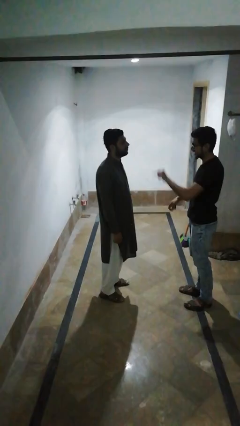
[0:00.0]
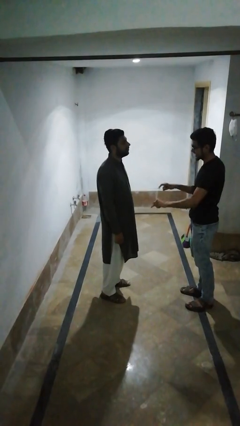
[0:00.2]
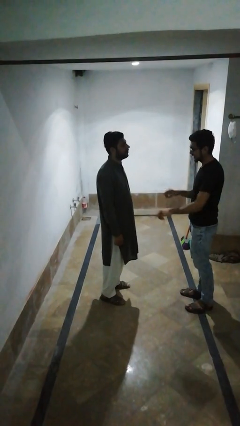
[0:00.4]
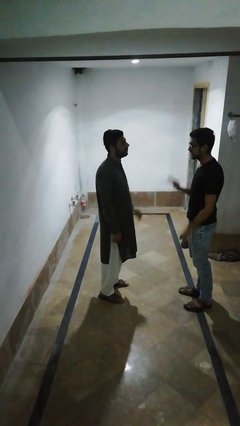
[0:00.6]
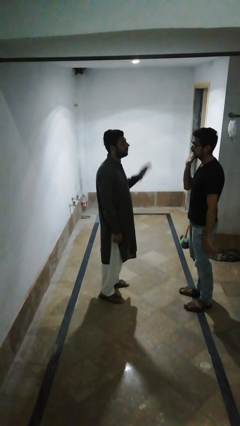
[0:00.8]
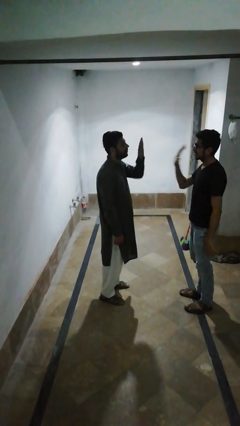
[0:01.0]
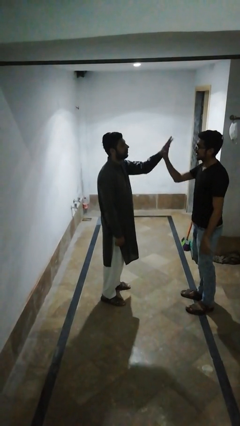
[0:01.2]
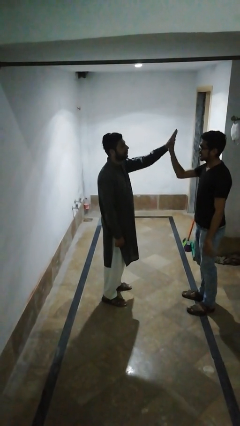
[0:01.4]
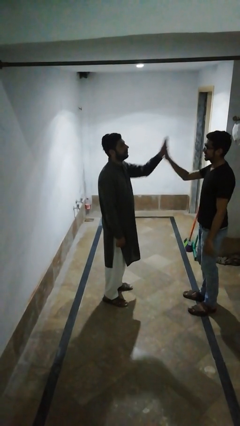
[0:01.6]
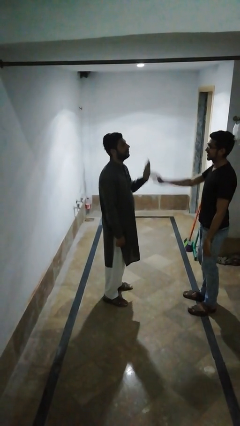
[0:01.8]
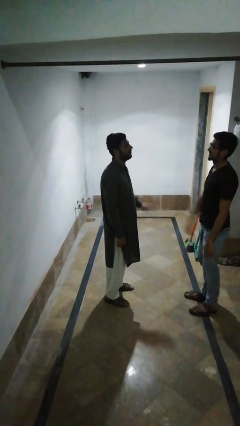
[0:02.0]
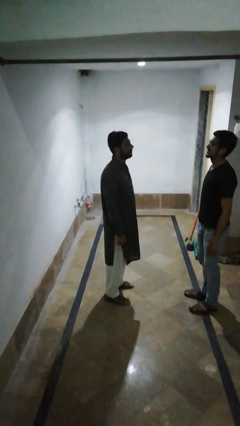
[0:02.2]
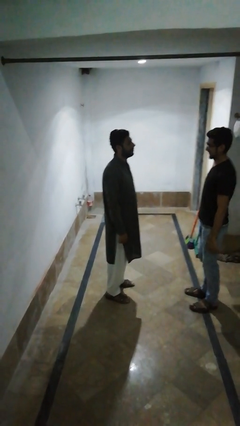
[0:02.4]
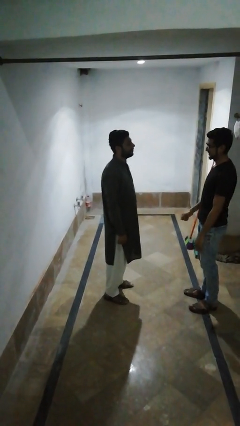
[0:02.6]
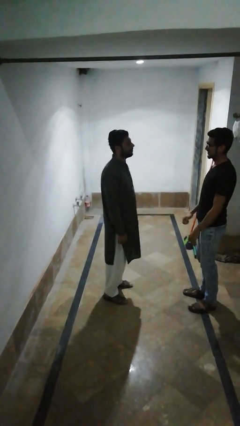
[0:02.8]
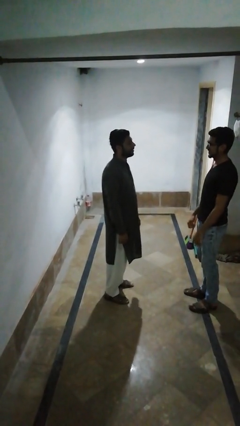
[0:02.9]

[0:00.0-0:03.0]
person highfives hand

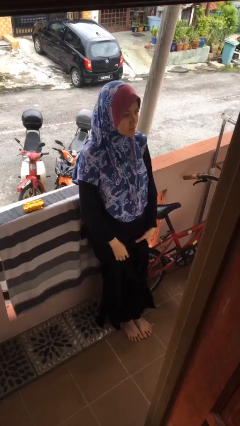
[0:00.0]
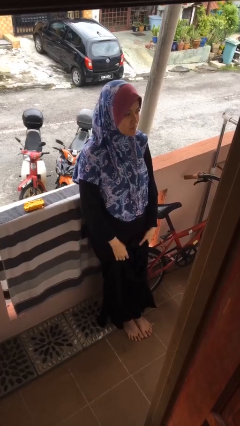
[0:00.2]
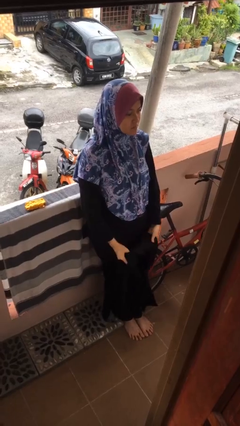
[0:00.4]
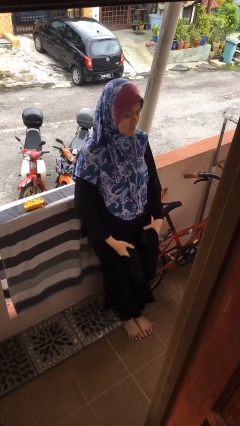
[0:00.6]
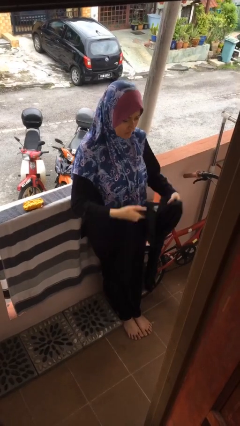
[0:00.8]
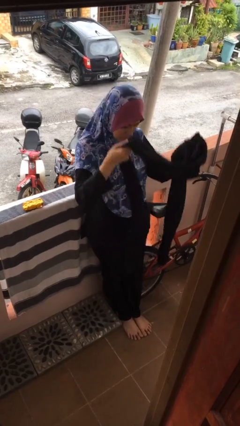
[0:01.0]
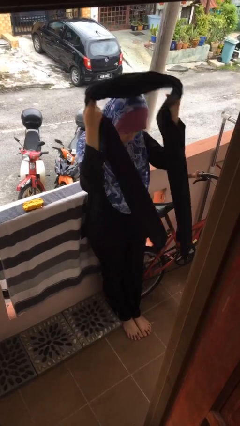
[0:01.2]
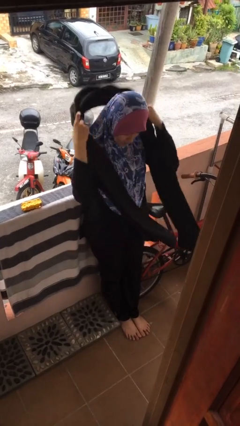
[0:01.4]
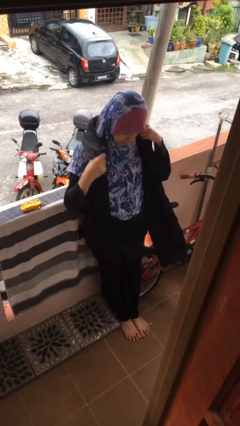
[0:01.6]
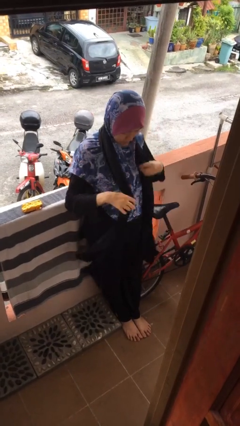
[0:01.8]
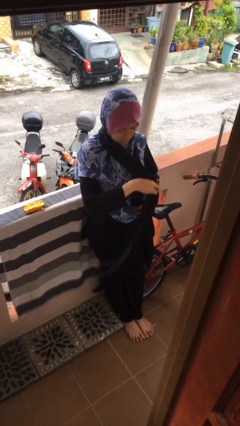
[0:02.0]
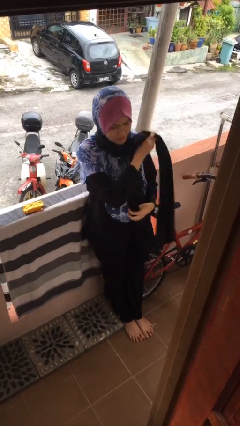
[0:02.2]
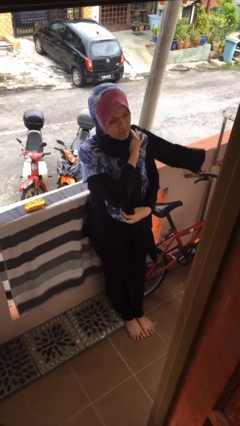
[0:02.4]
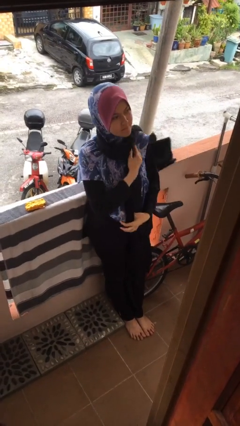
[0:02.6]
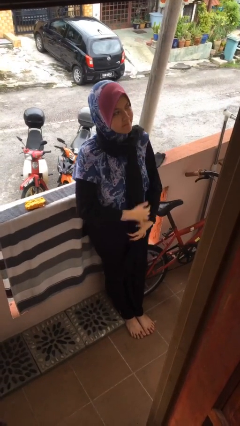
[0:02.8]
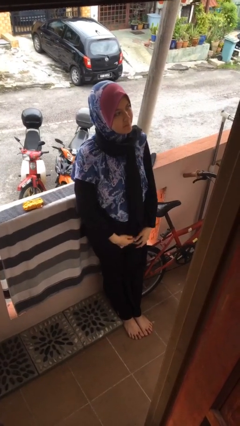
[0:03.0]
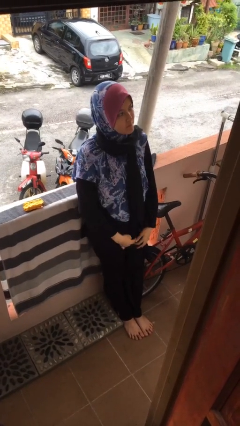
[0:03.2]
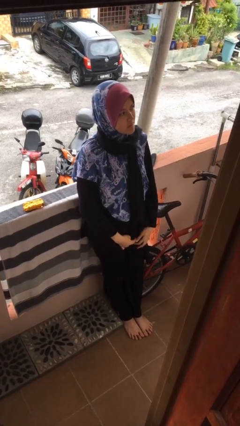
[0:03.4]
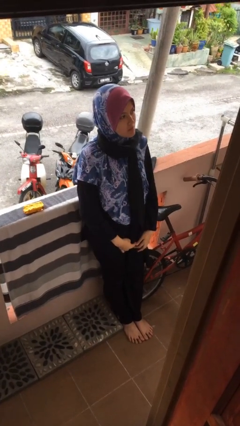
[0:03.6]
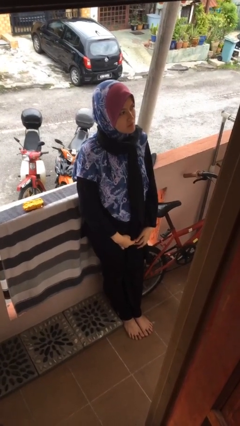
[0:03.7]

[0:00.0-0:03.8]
person puts on scarf

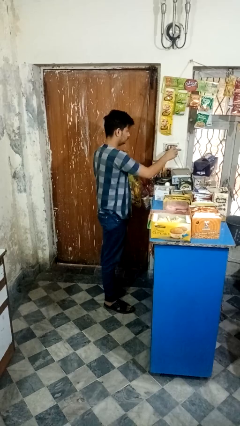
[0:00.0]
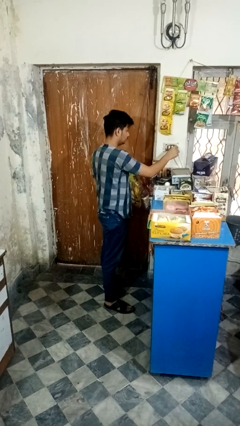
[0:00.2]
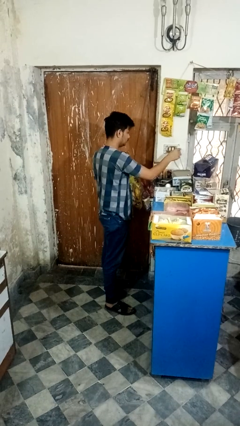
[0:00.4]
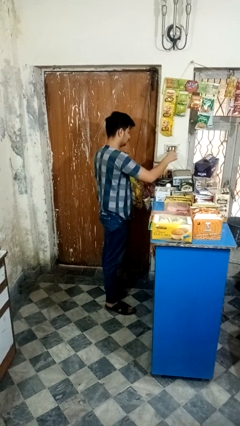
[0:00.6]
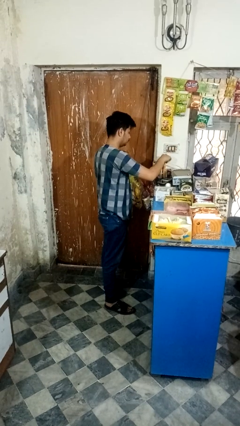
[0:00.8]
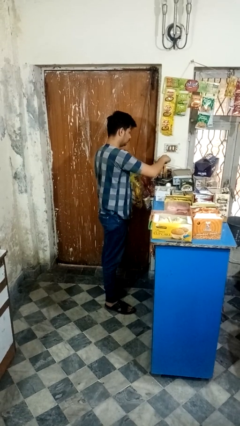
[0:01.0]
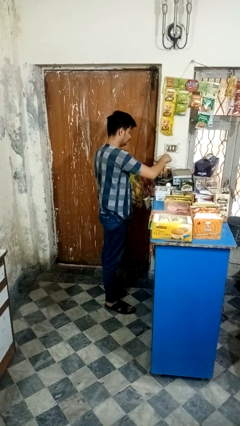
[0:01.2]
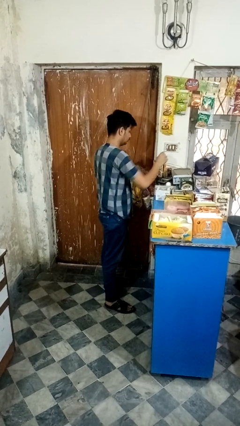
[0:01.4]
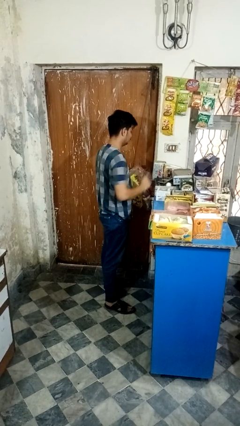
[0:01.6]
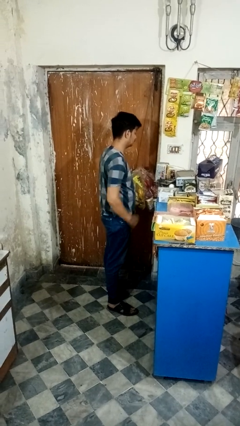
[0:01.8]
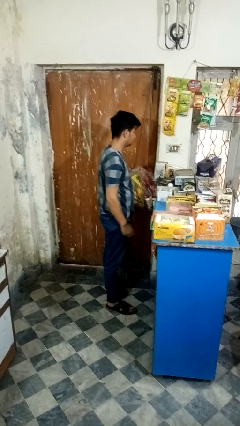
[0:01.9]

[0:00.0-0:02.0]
person unplugs from electrical socket

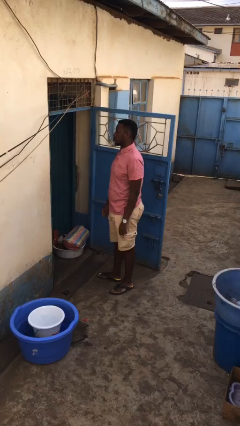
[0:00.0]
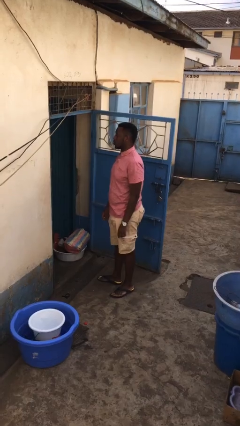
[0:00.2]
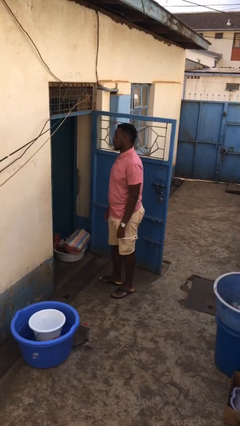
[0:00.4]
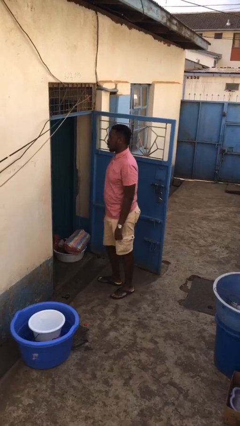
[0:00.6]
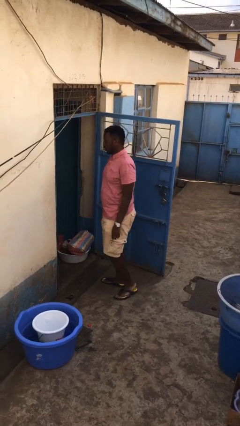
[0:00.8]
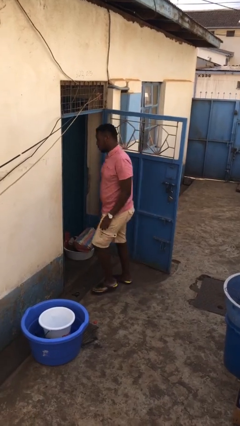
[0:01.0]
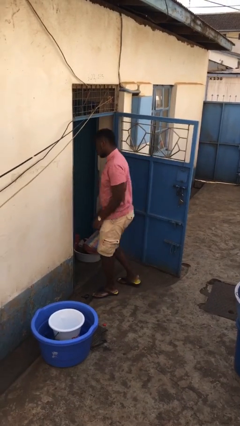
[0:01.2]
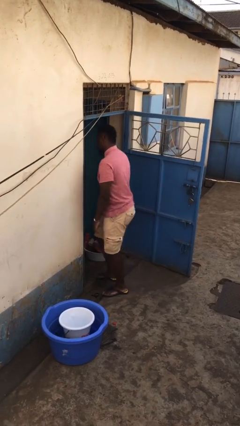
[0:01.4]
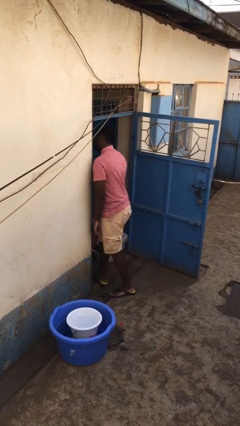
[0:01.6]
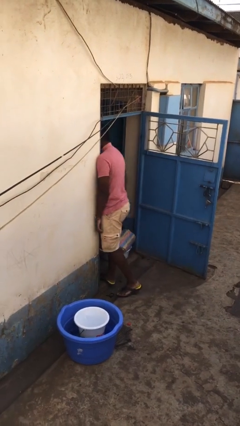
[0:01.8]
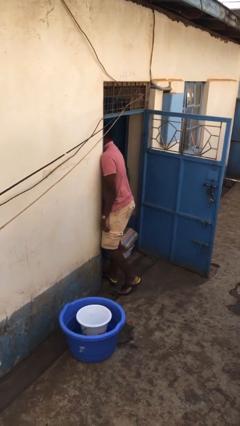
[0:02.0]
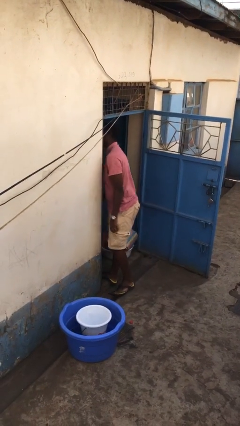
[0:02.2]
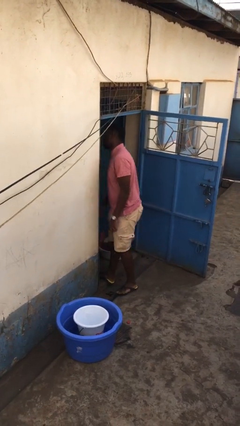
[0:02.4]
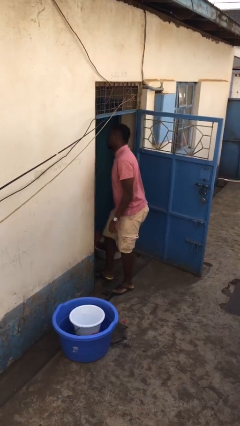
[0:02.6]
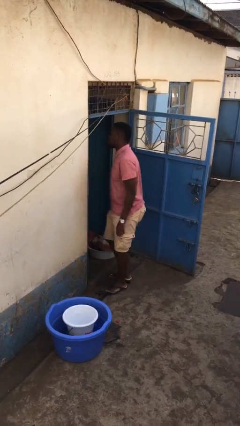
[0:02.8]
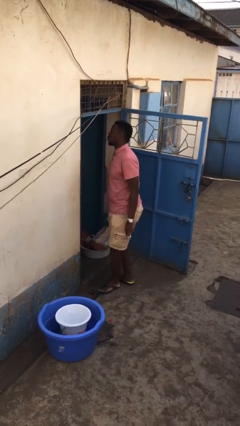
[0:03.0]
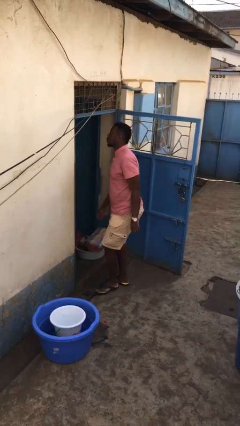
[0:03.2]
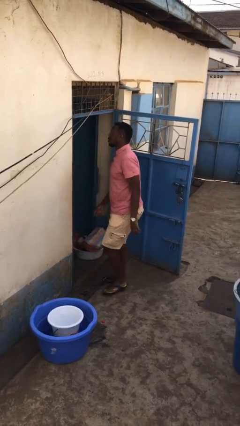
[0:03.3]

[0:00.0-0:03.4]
person bumps into wall

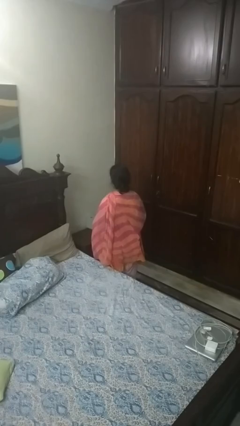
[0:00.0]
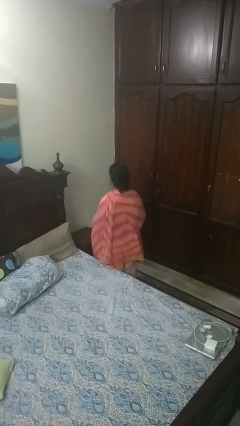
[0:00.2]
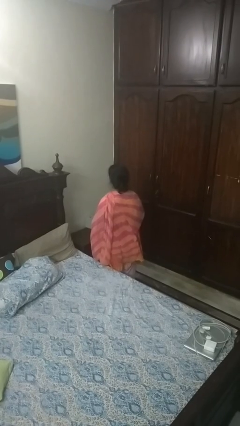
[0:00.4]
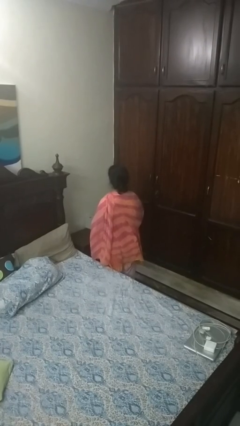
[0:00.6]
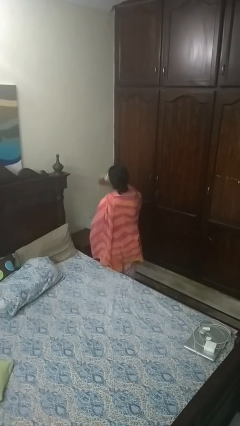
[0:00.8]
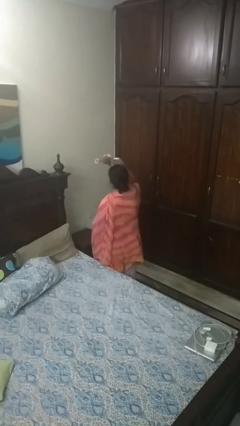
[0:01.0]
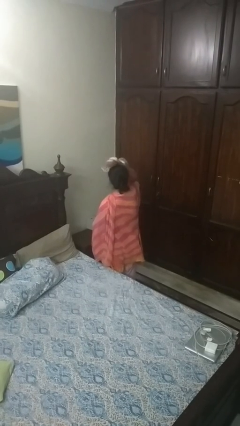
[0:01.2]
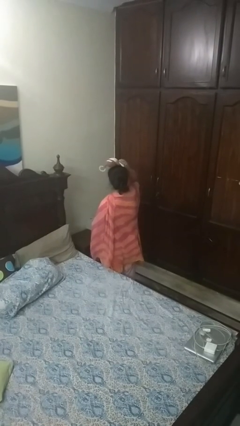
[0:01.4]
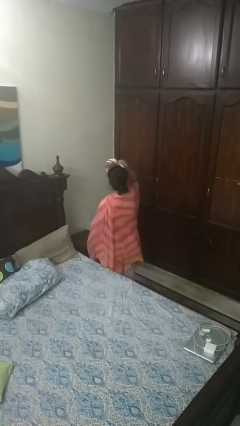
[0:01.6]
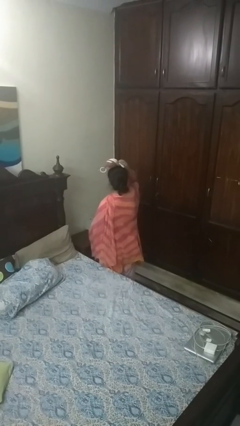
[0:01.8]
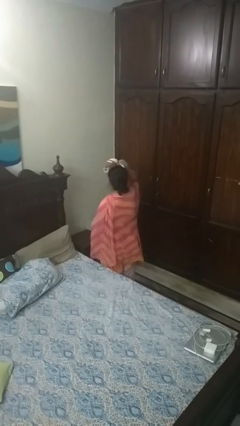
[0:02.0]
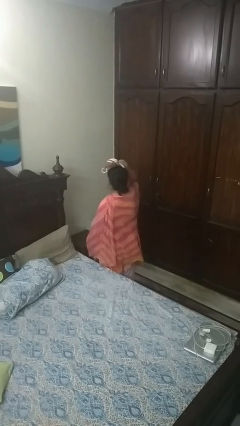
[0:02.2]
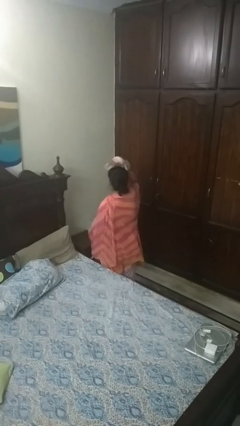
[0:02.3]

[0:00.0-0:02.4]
person holds object above head

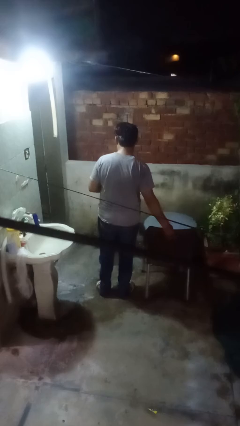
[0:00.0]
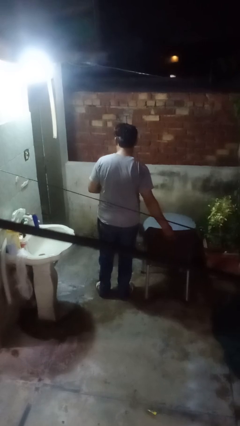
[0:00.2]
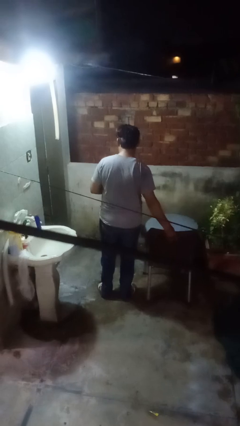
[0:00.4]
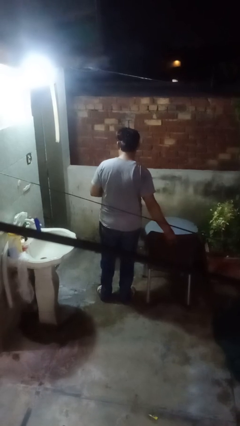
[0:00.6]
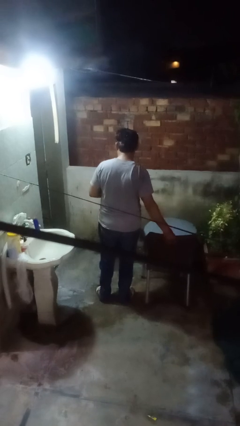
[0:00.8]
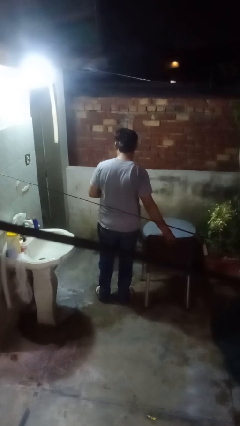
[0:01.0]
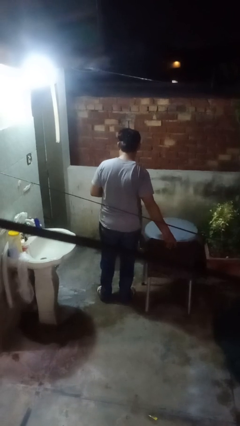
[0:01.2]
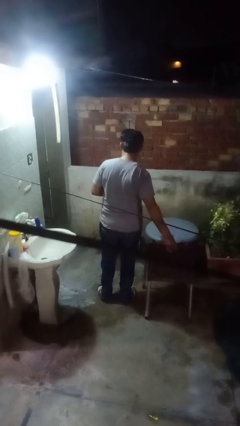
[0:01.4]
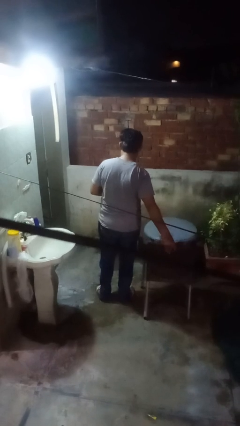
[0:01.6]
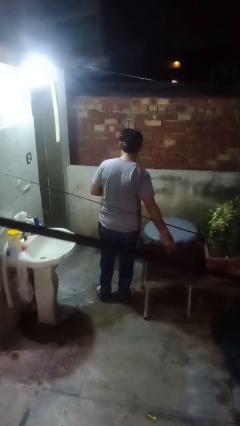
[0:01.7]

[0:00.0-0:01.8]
person pulls out chair

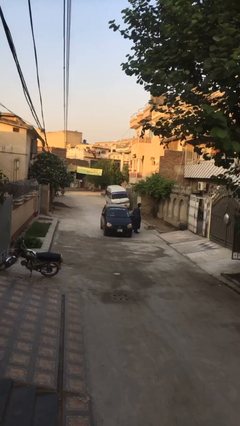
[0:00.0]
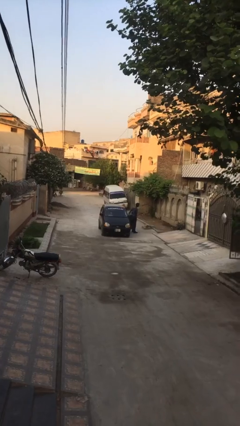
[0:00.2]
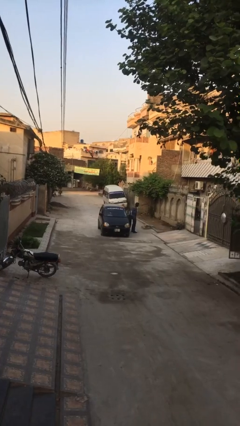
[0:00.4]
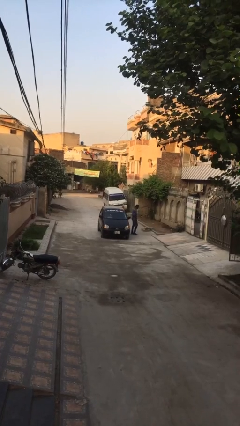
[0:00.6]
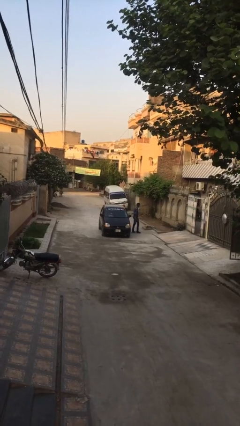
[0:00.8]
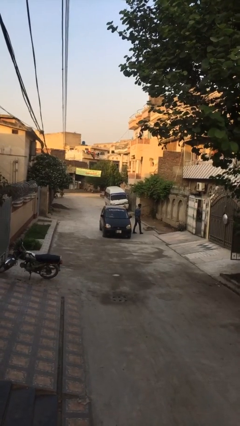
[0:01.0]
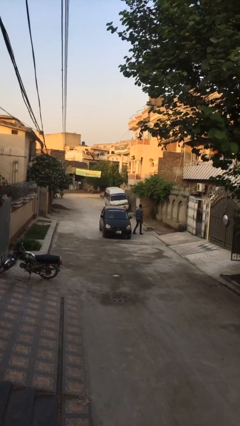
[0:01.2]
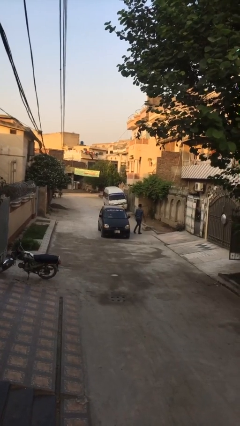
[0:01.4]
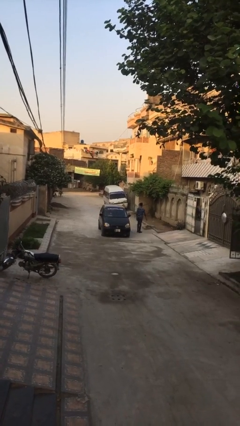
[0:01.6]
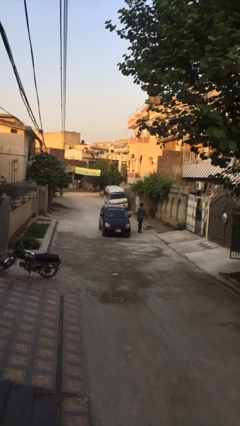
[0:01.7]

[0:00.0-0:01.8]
car drops off person
